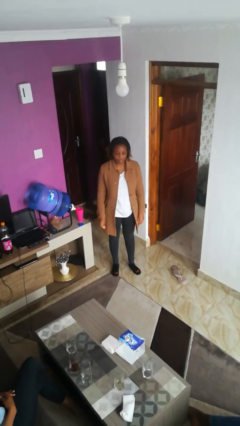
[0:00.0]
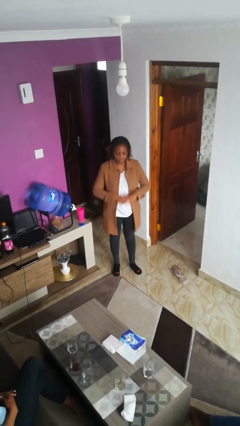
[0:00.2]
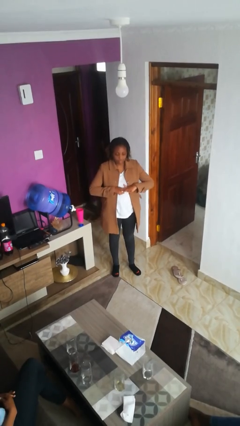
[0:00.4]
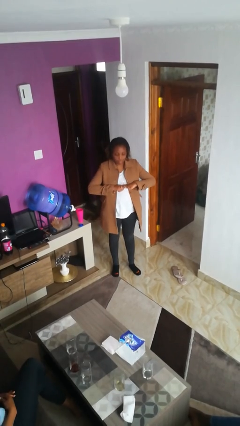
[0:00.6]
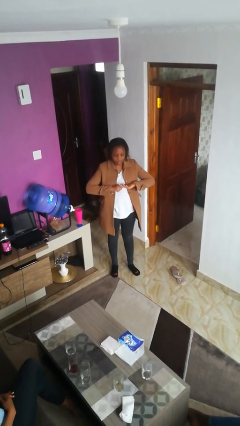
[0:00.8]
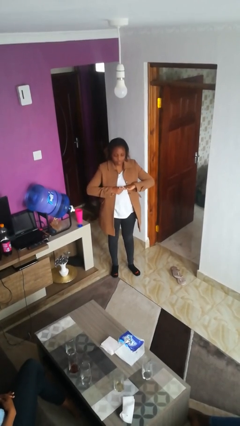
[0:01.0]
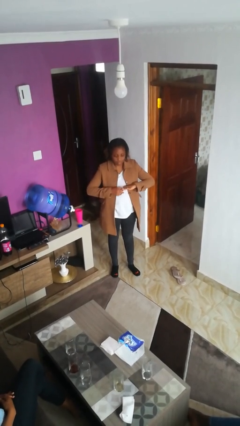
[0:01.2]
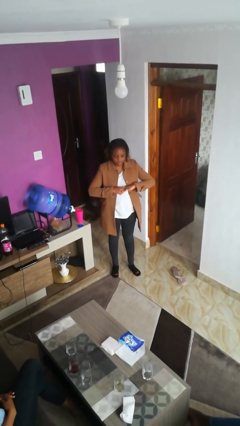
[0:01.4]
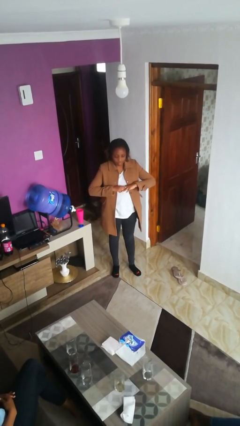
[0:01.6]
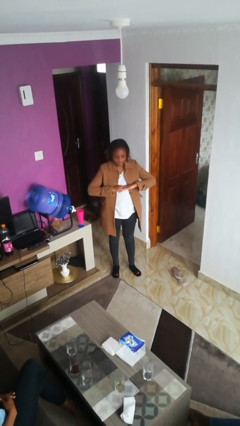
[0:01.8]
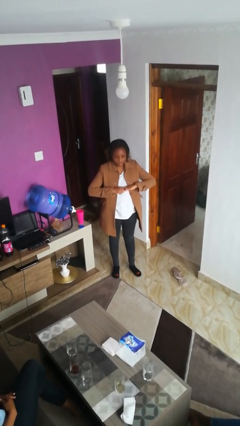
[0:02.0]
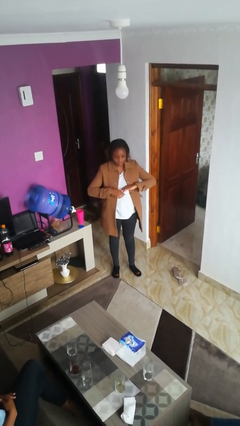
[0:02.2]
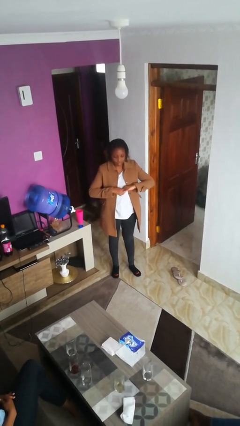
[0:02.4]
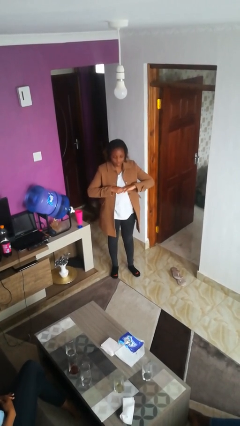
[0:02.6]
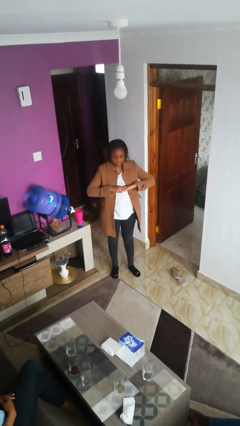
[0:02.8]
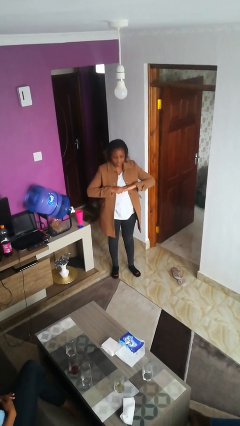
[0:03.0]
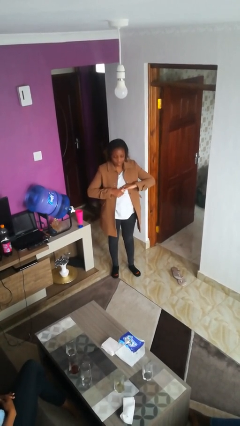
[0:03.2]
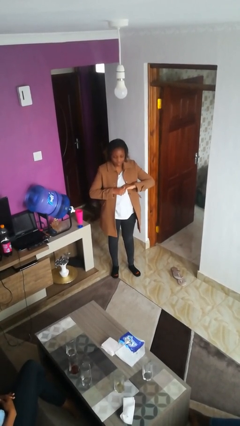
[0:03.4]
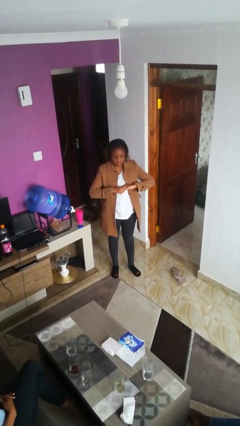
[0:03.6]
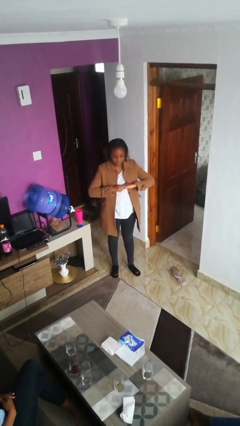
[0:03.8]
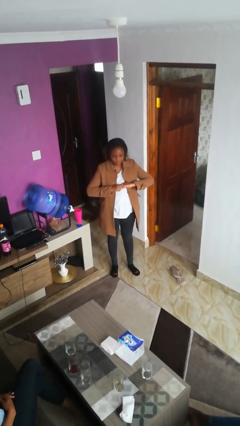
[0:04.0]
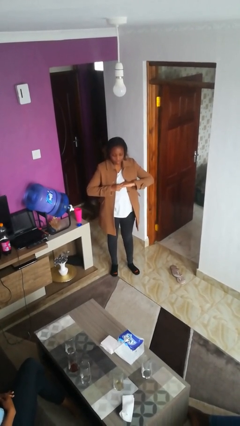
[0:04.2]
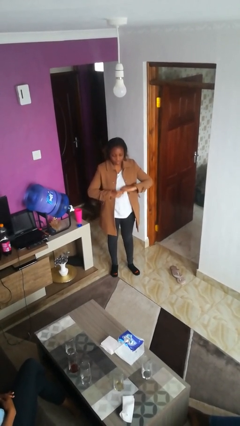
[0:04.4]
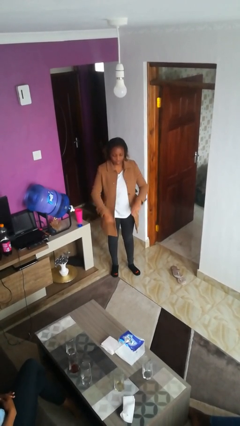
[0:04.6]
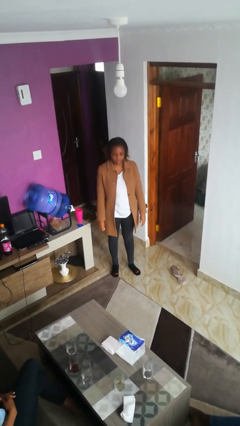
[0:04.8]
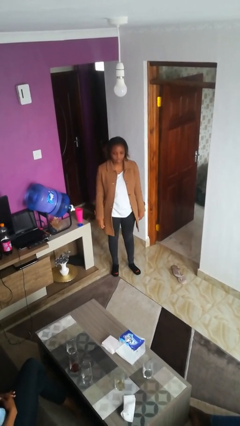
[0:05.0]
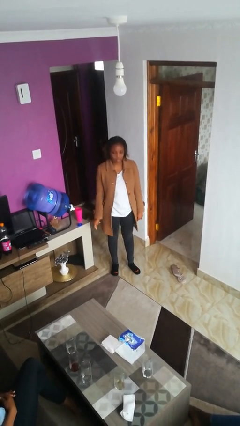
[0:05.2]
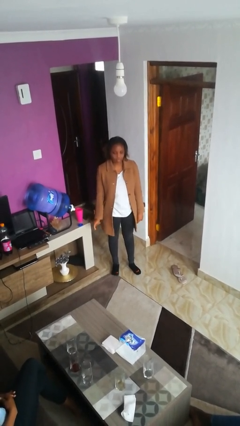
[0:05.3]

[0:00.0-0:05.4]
person cracks knuckles

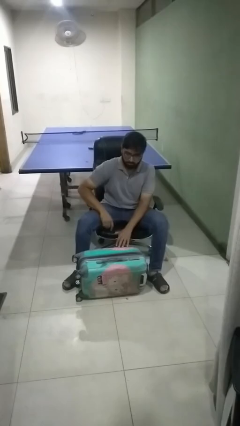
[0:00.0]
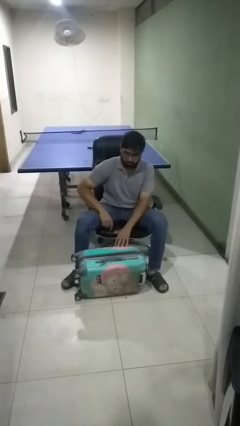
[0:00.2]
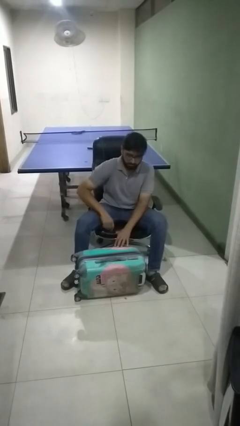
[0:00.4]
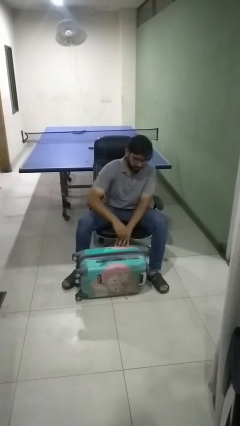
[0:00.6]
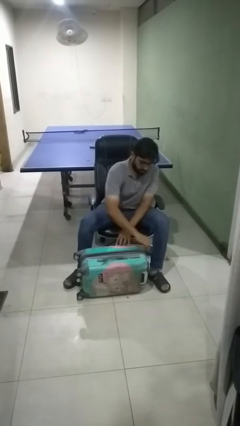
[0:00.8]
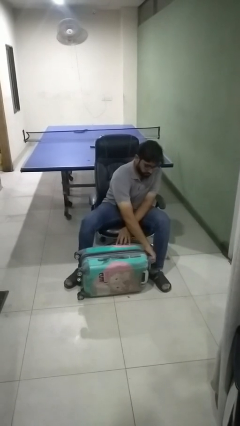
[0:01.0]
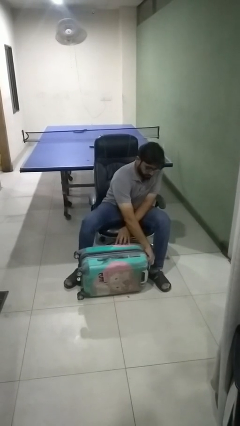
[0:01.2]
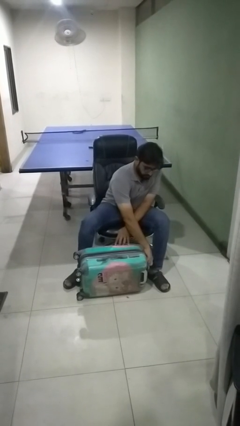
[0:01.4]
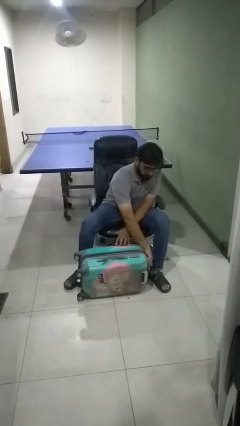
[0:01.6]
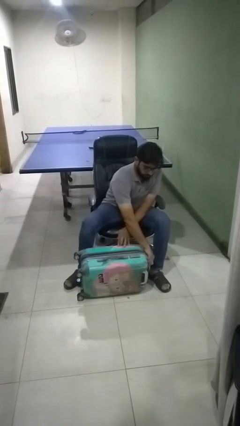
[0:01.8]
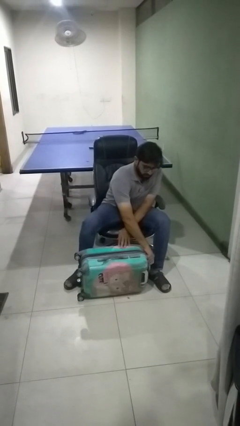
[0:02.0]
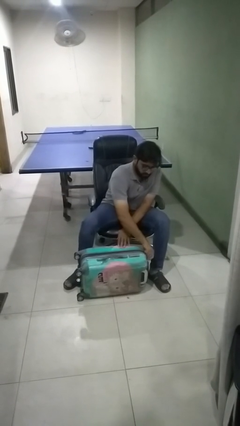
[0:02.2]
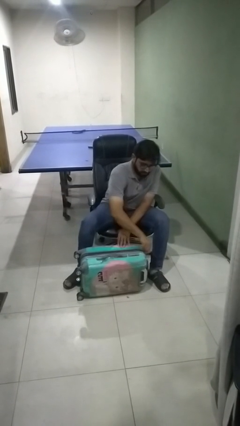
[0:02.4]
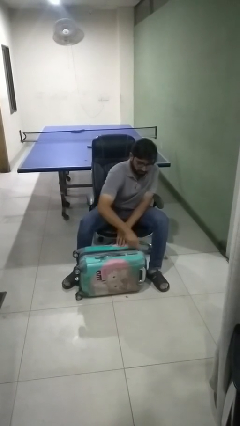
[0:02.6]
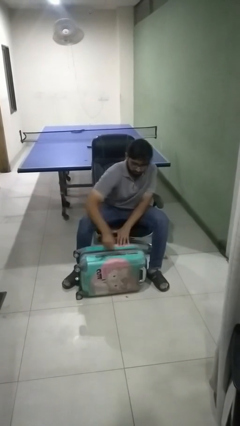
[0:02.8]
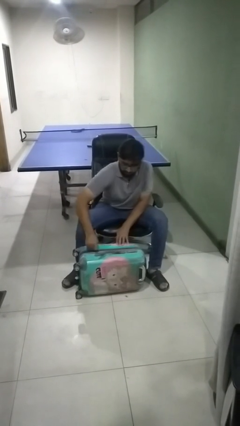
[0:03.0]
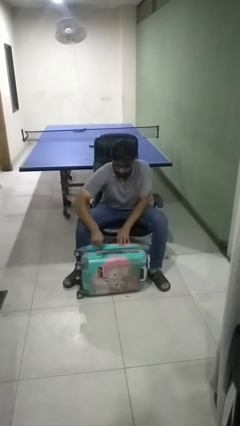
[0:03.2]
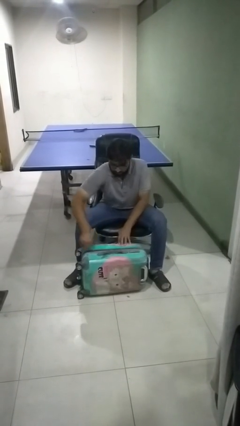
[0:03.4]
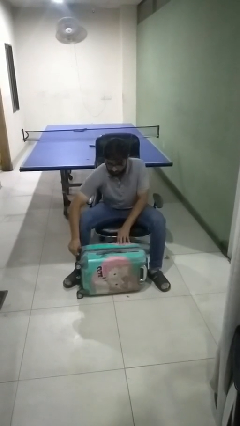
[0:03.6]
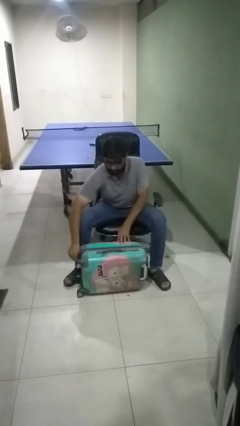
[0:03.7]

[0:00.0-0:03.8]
person closes suitcase

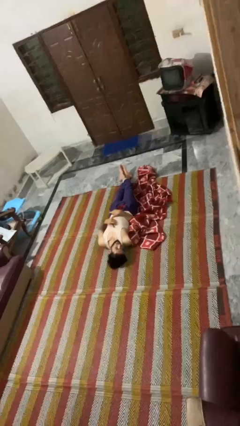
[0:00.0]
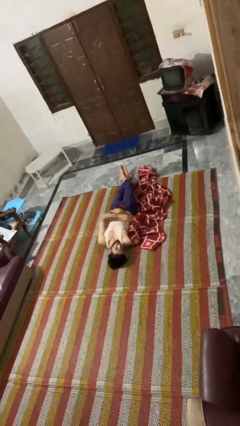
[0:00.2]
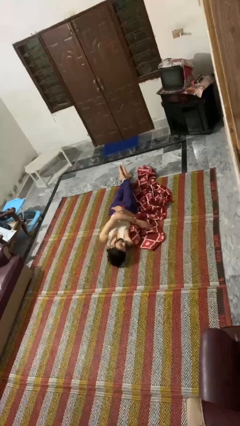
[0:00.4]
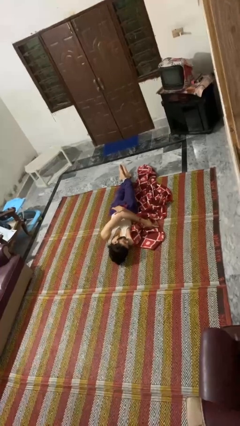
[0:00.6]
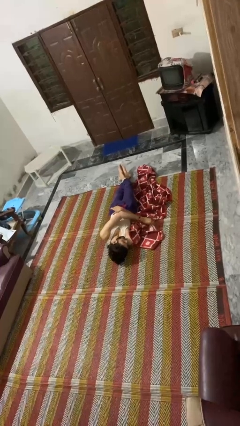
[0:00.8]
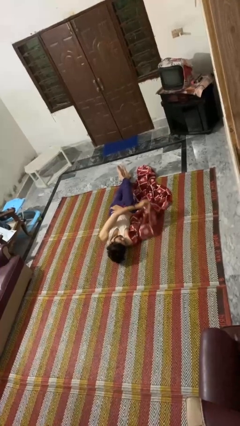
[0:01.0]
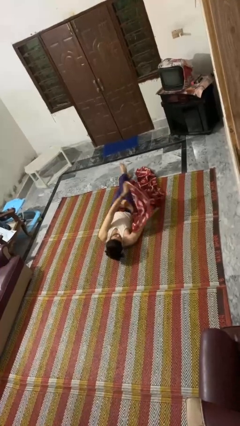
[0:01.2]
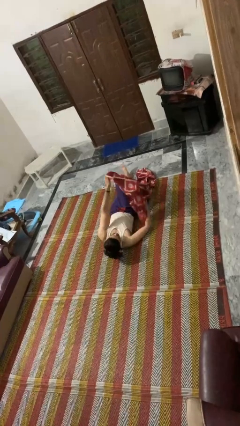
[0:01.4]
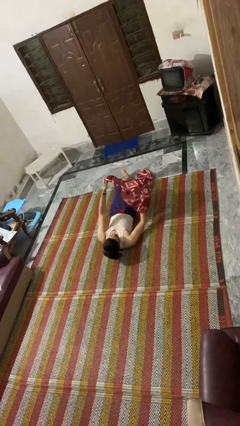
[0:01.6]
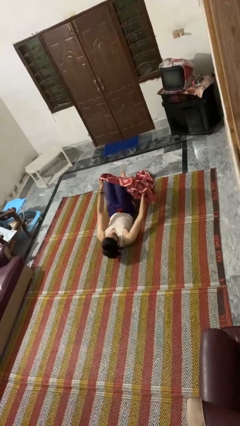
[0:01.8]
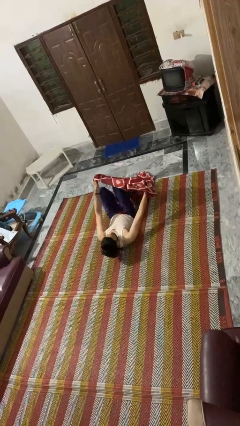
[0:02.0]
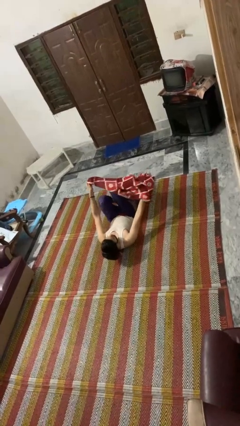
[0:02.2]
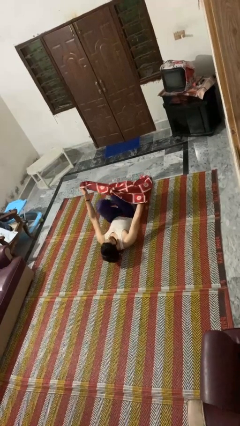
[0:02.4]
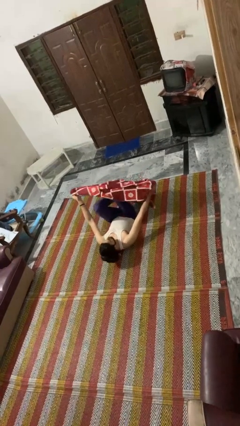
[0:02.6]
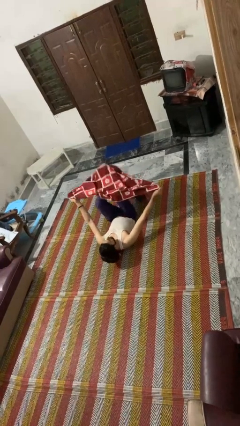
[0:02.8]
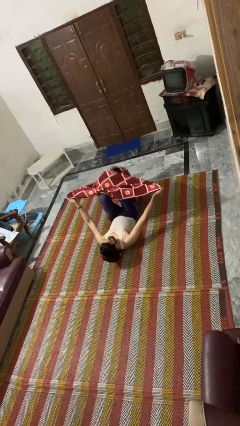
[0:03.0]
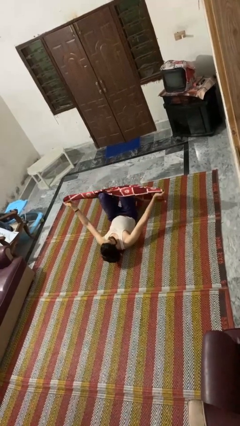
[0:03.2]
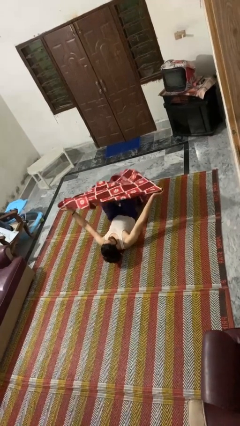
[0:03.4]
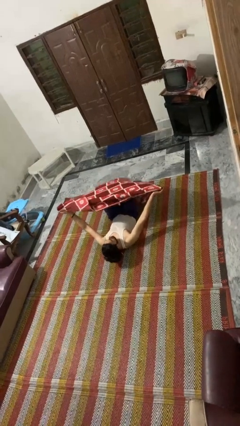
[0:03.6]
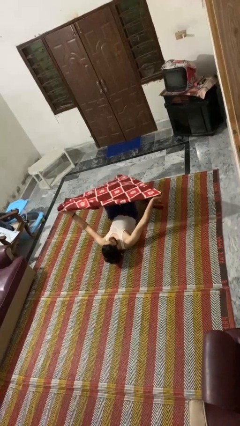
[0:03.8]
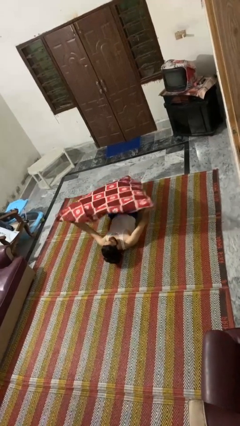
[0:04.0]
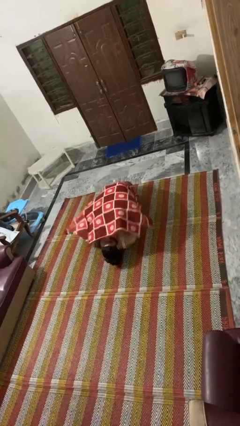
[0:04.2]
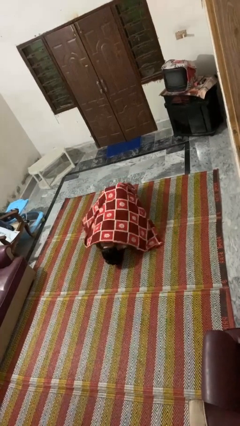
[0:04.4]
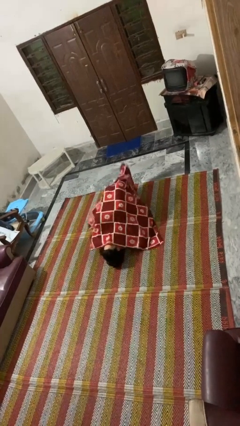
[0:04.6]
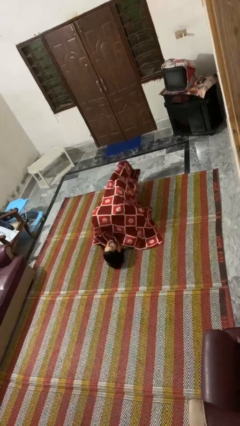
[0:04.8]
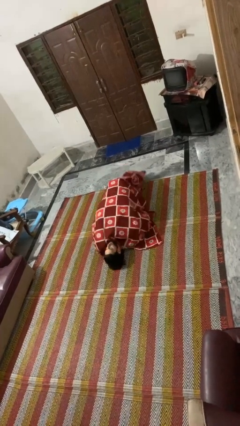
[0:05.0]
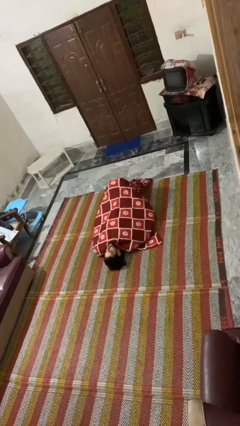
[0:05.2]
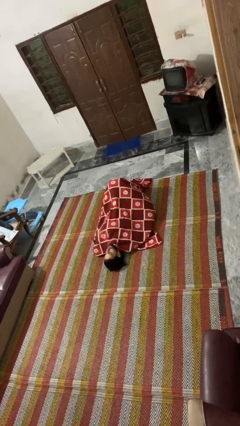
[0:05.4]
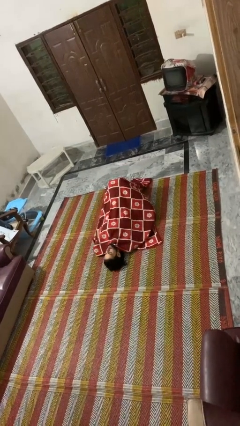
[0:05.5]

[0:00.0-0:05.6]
person covers with blanket

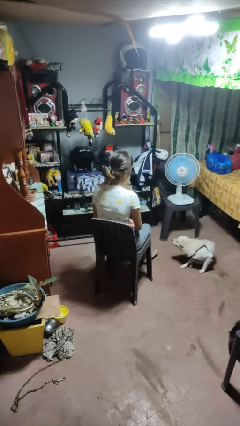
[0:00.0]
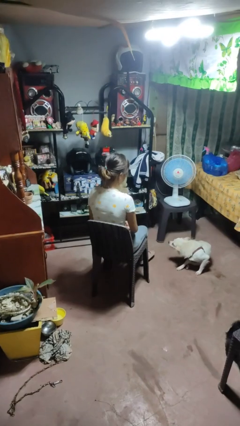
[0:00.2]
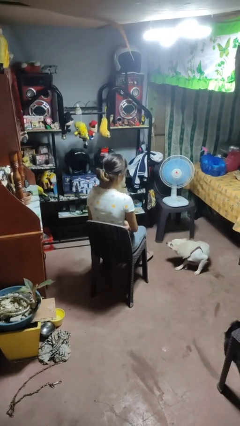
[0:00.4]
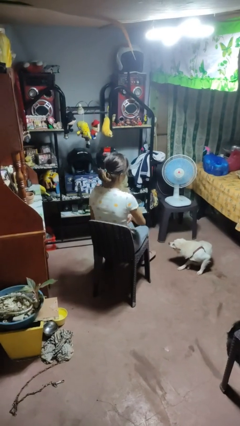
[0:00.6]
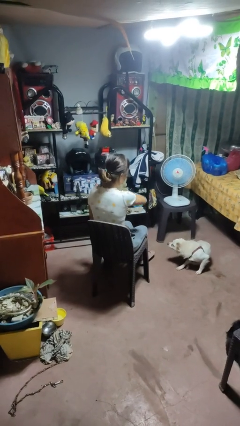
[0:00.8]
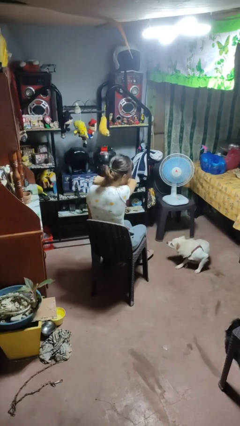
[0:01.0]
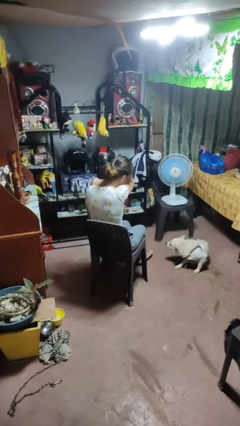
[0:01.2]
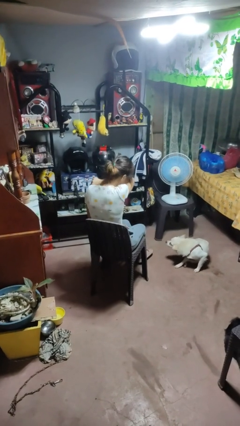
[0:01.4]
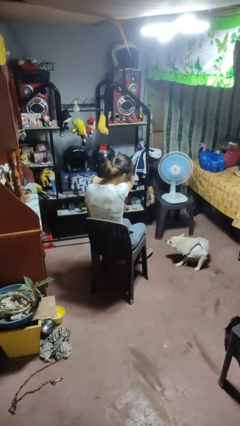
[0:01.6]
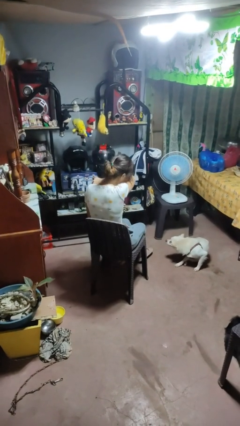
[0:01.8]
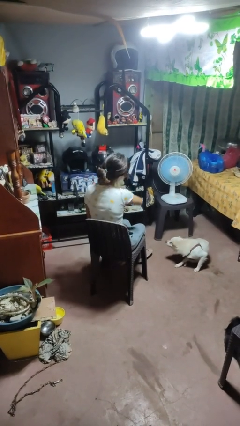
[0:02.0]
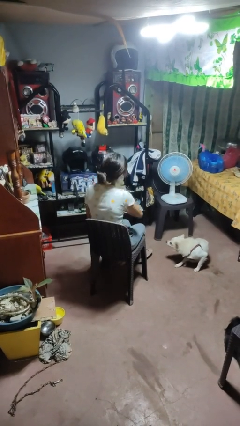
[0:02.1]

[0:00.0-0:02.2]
person sneezes into arm

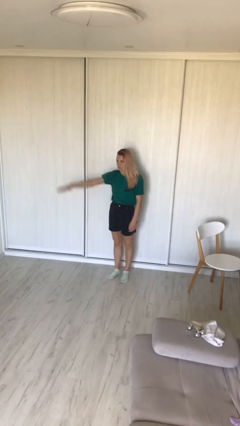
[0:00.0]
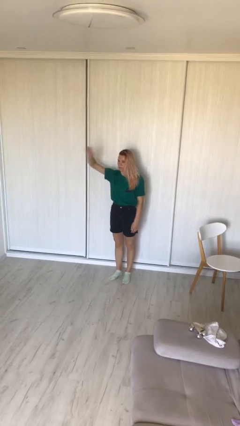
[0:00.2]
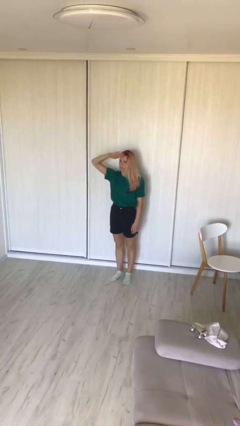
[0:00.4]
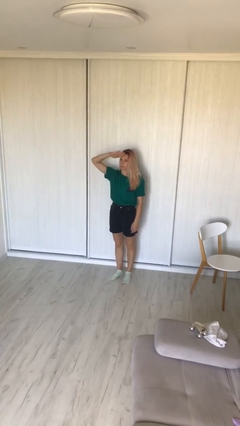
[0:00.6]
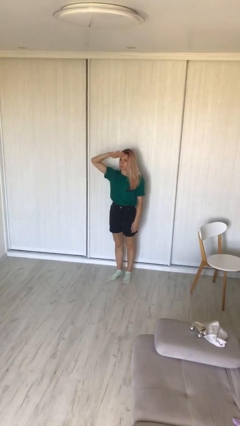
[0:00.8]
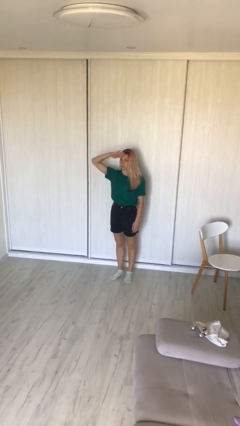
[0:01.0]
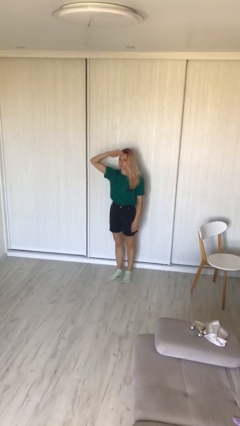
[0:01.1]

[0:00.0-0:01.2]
person salutes
